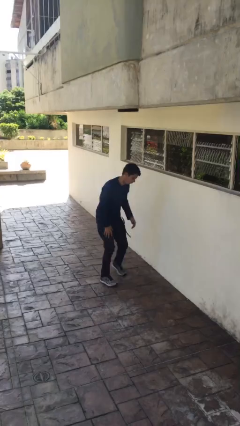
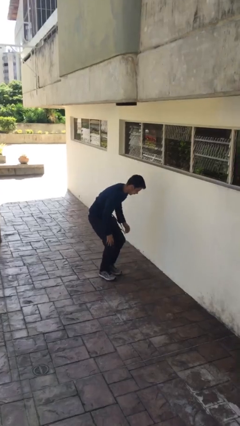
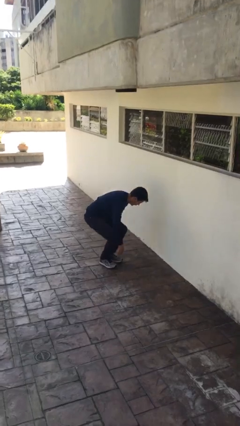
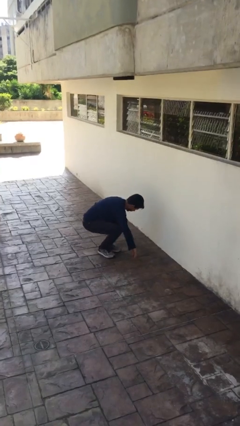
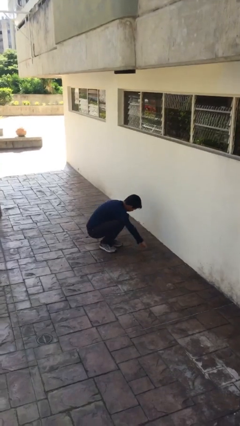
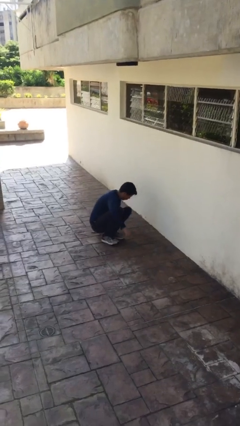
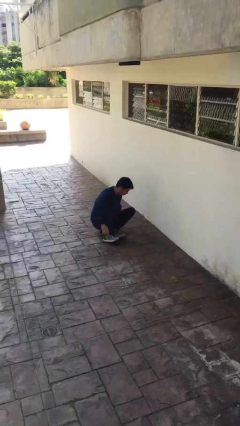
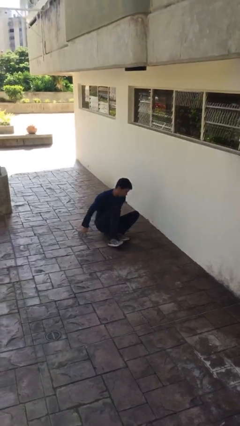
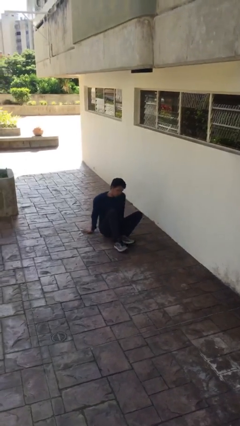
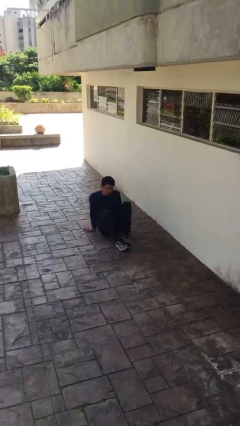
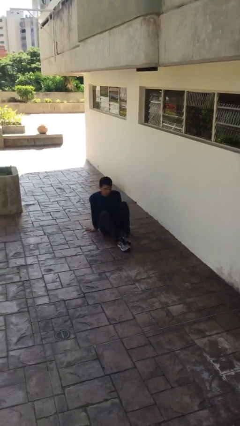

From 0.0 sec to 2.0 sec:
person sits down

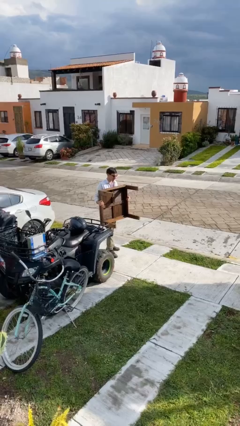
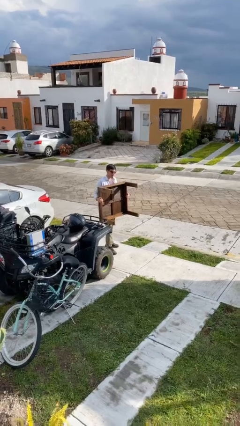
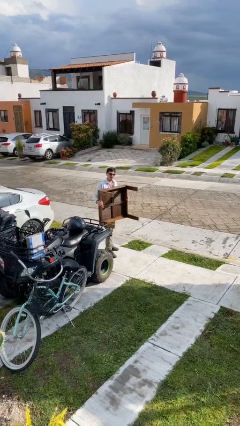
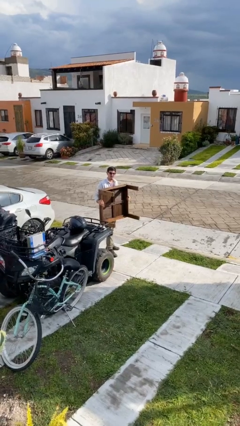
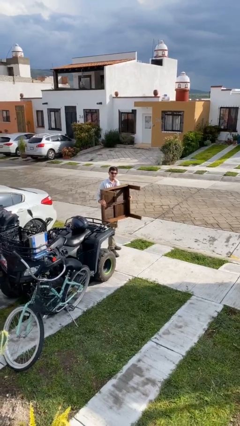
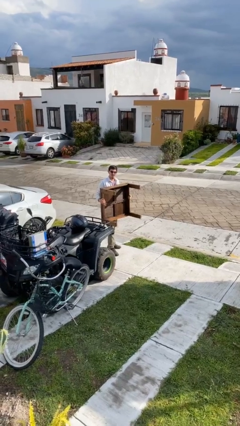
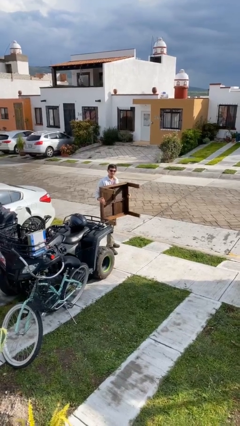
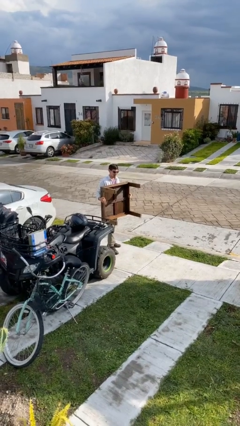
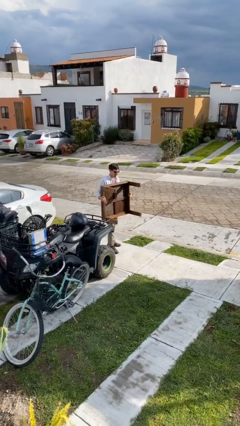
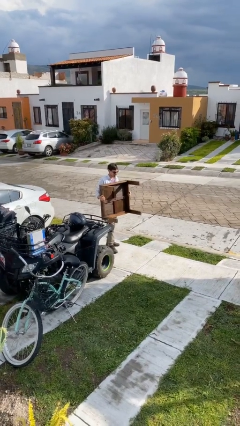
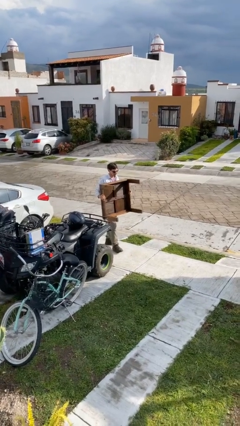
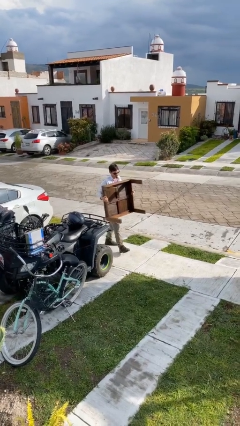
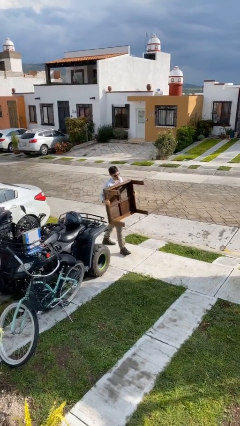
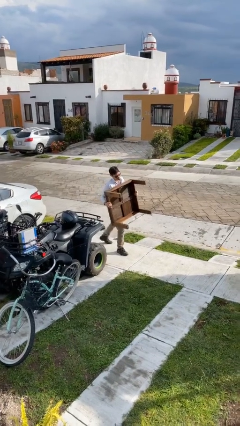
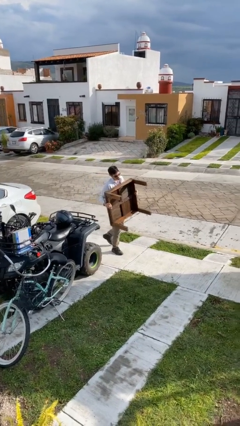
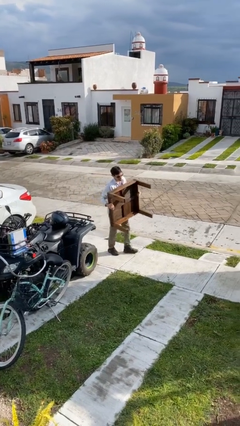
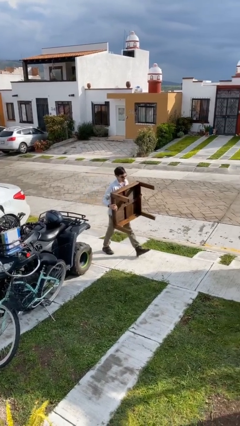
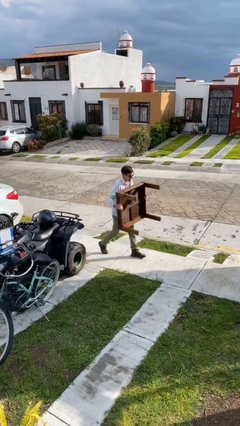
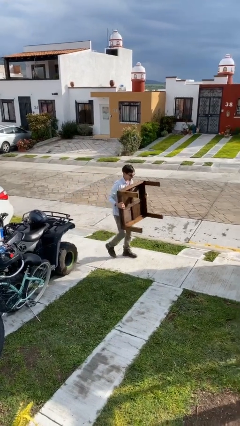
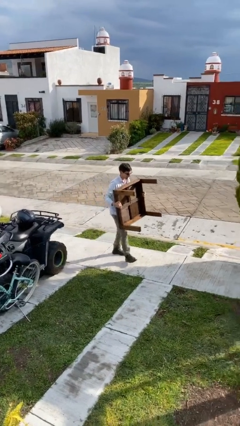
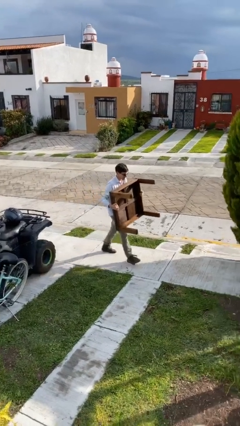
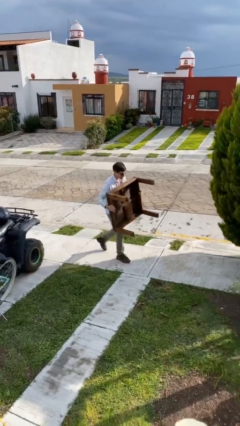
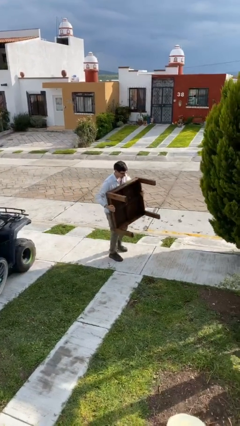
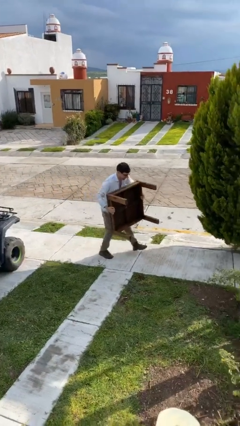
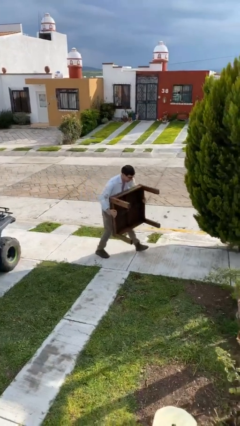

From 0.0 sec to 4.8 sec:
person carries heavy object

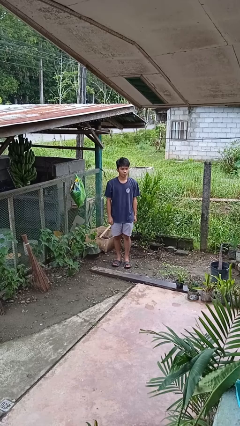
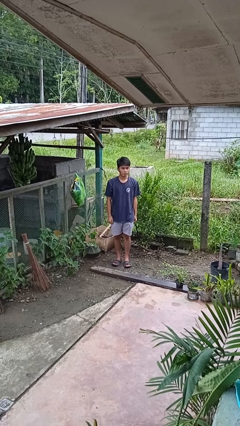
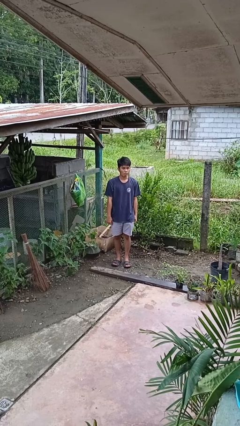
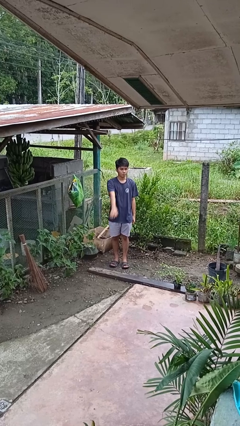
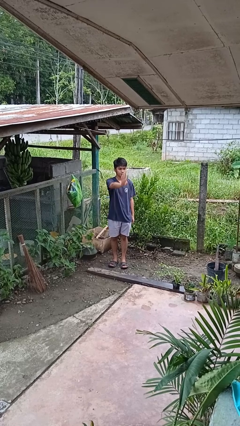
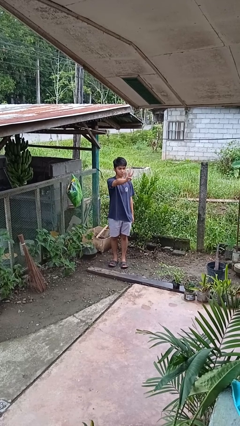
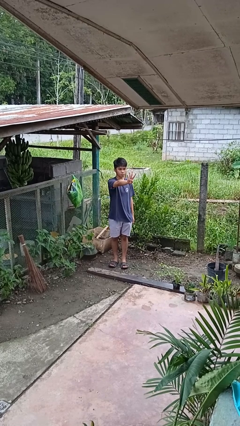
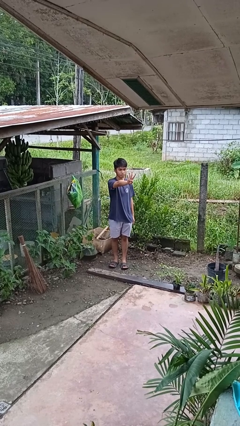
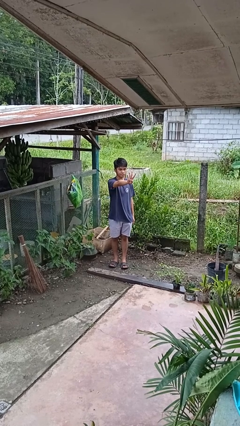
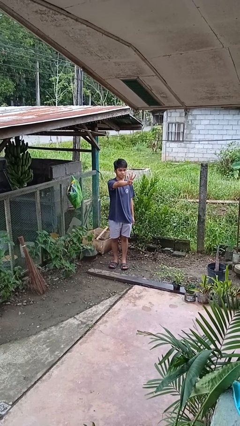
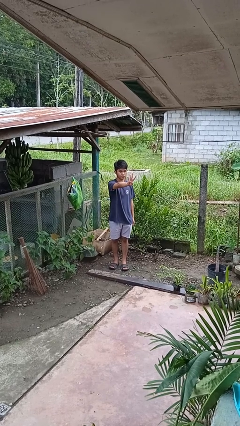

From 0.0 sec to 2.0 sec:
person gestures number four

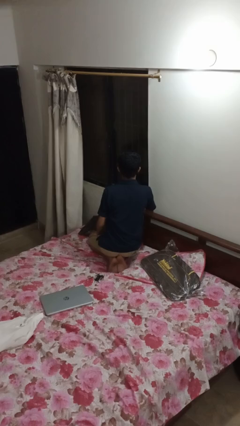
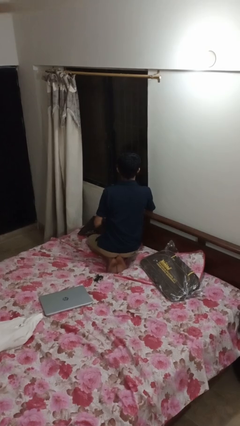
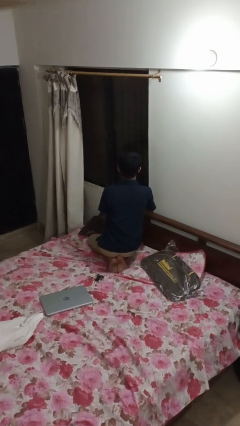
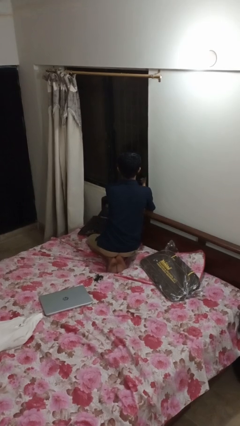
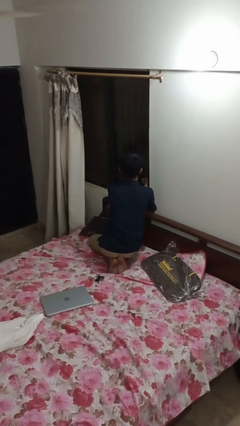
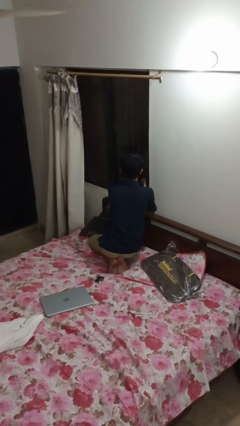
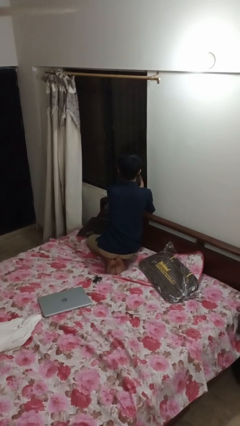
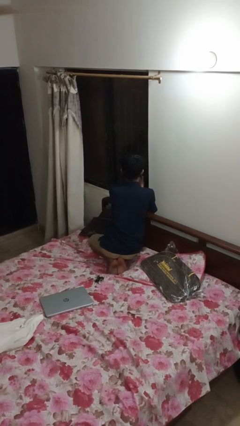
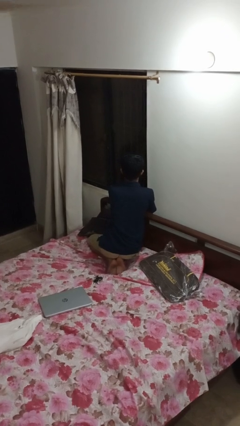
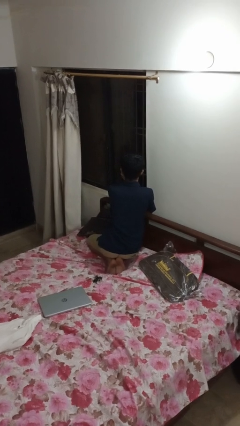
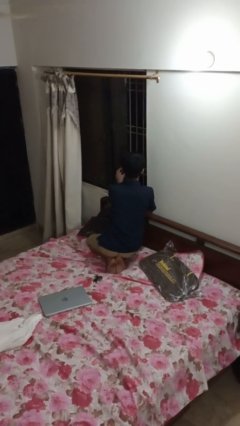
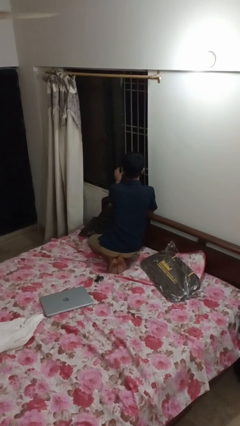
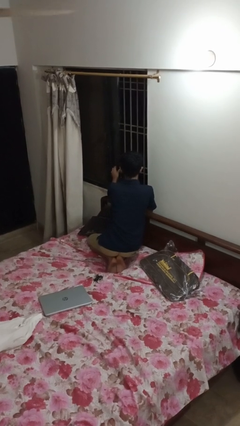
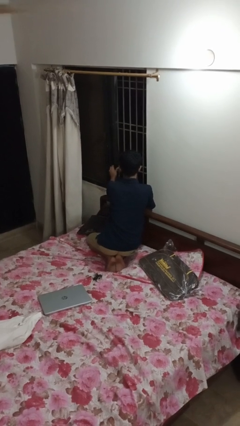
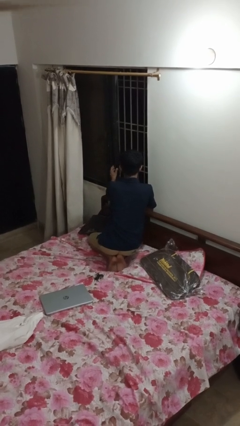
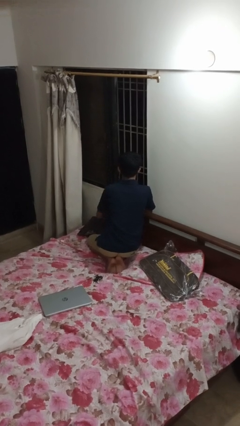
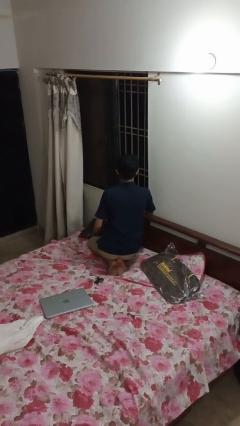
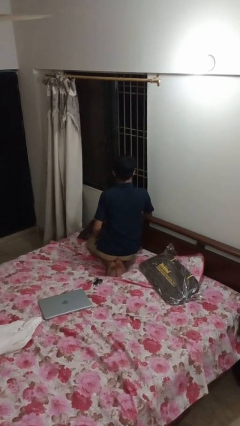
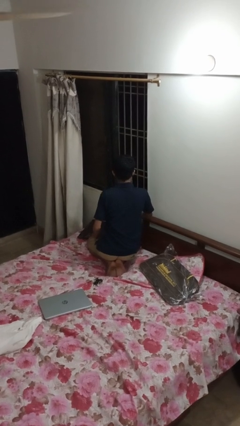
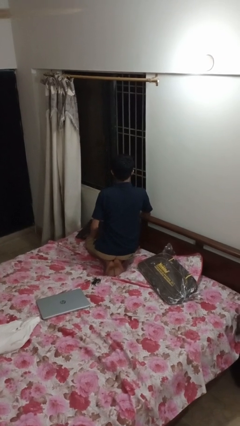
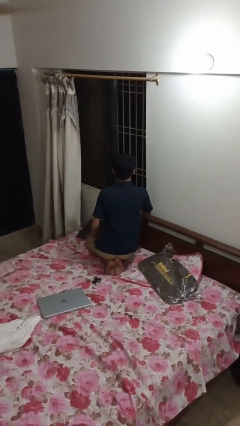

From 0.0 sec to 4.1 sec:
person opens home window

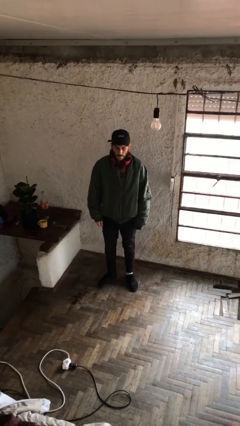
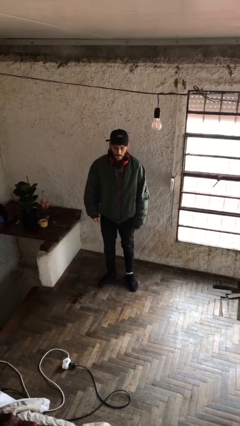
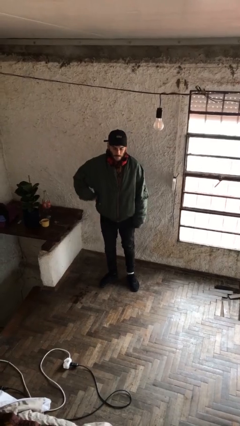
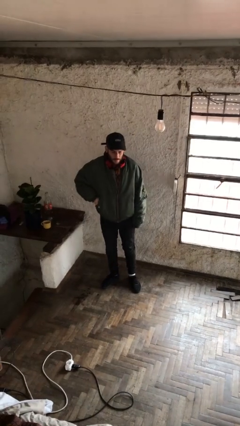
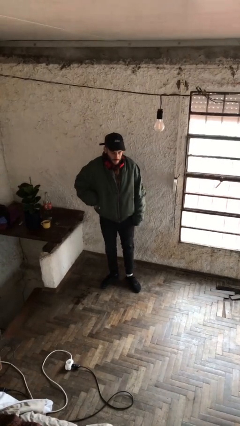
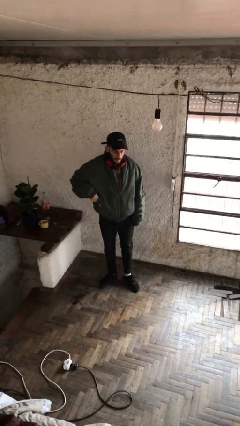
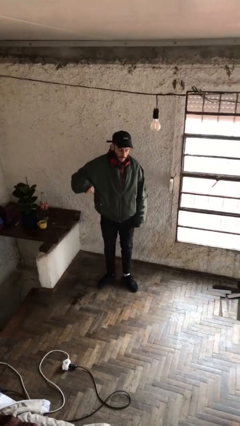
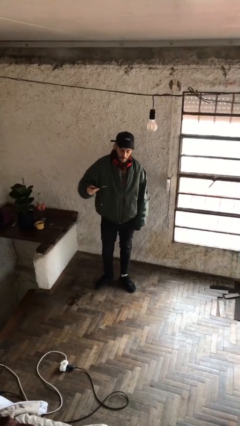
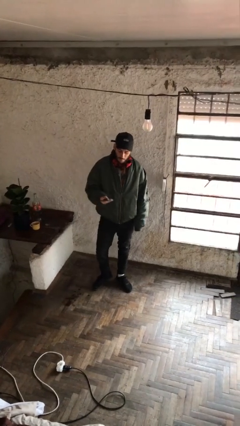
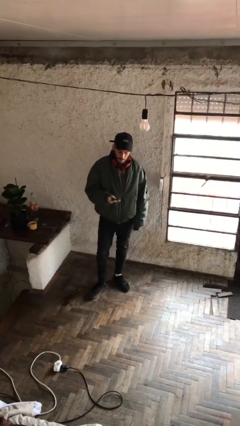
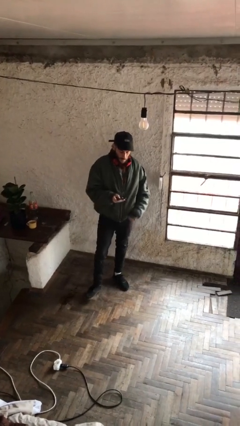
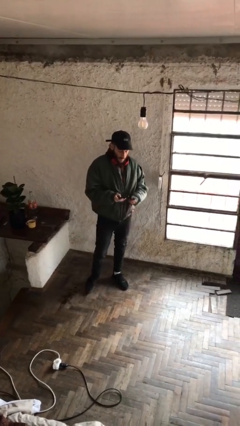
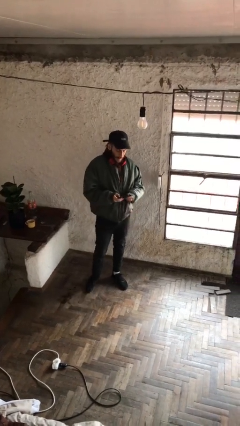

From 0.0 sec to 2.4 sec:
person takes phone from pocket

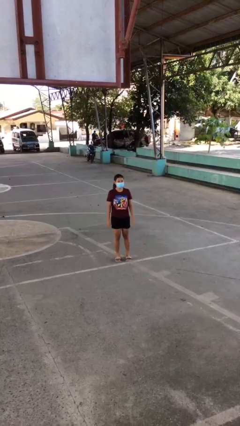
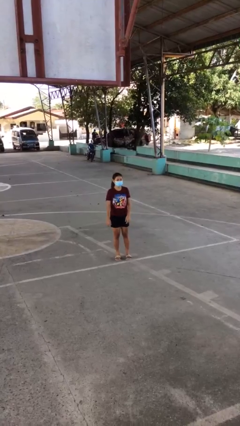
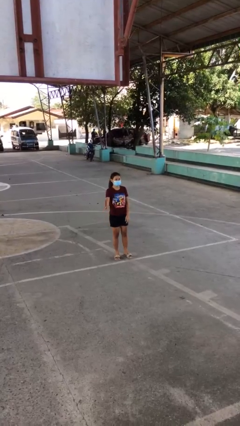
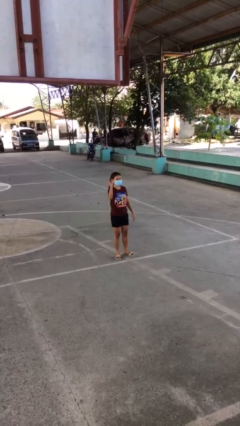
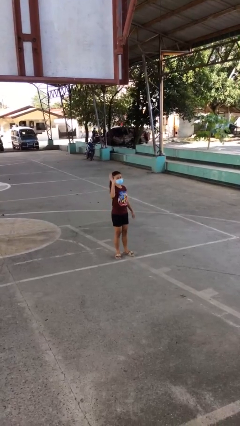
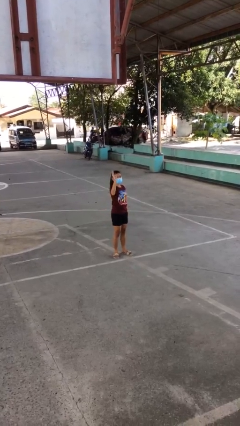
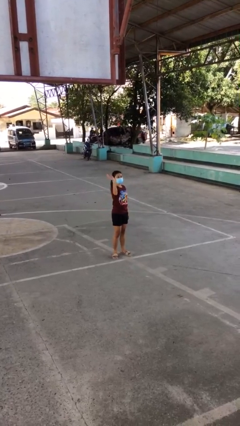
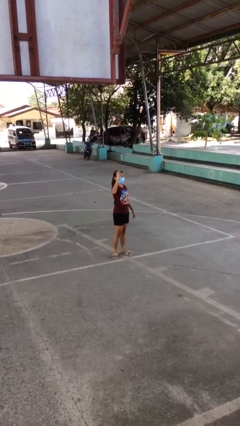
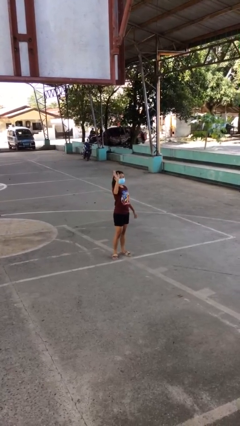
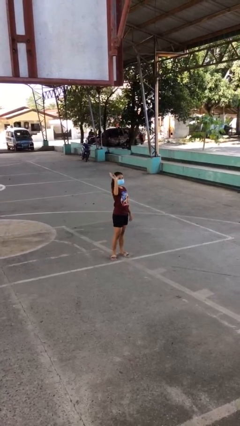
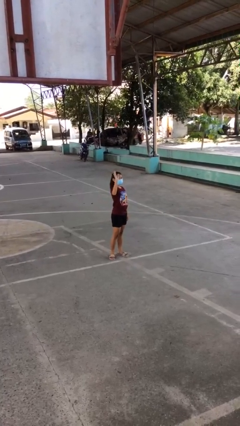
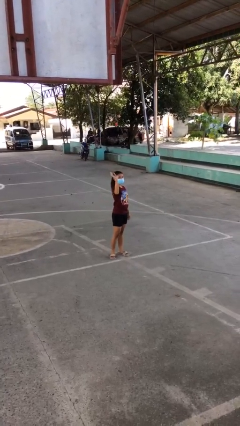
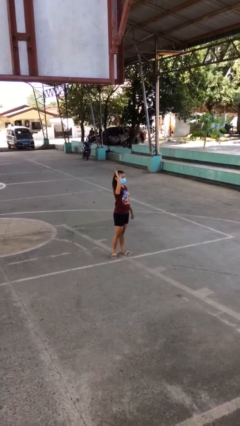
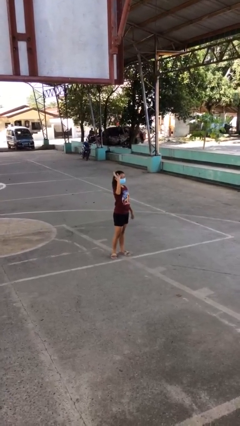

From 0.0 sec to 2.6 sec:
person waves at person
